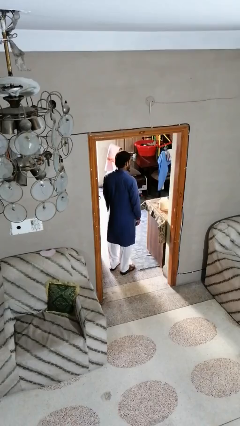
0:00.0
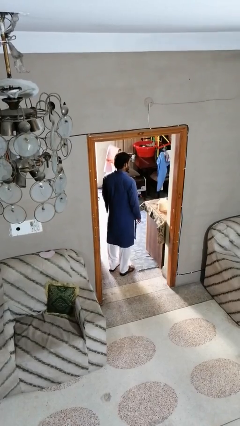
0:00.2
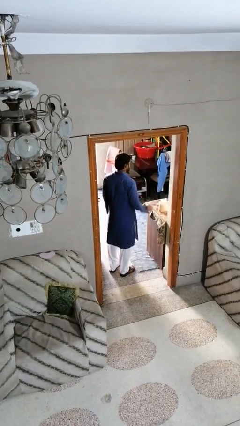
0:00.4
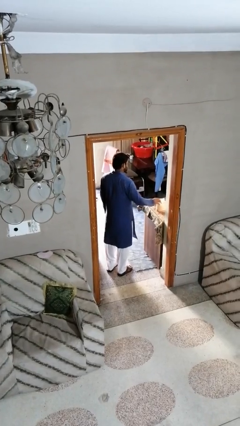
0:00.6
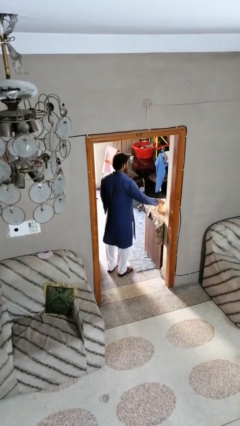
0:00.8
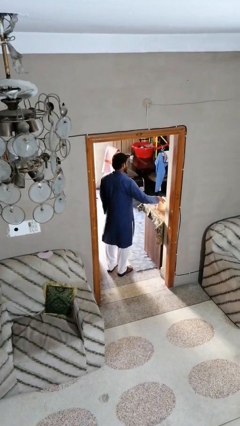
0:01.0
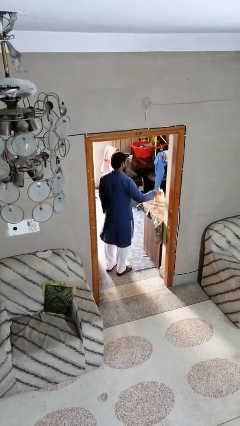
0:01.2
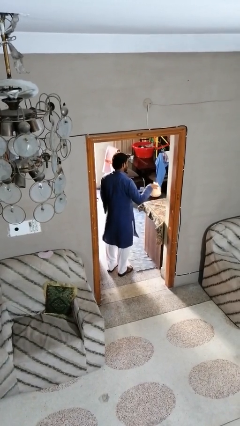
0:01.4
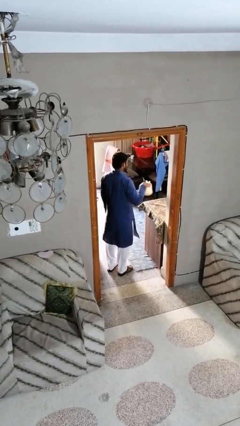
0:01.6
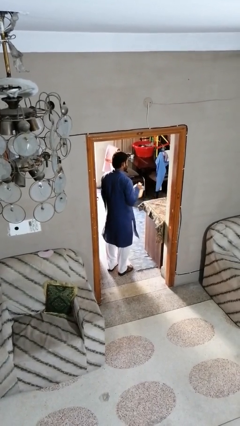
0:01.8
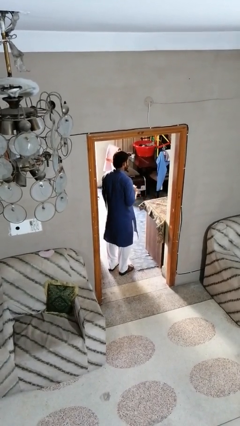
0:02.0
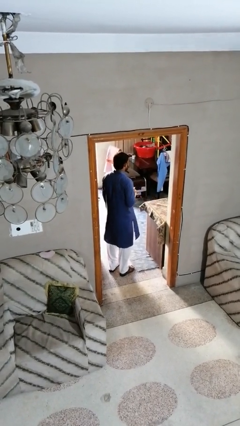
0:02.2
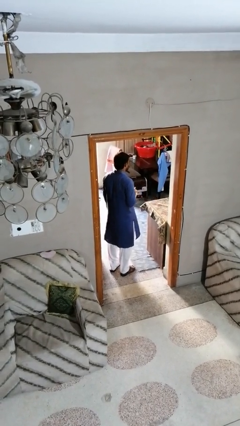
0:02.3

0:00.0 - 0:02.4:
person picks up object from countertop

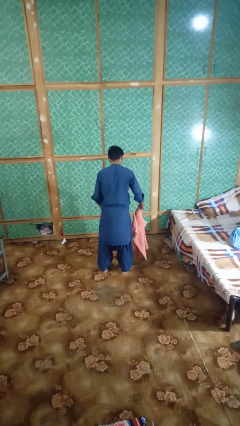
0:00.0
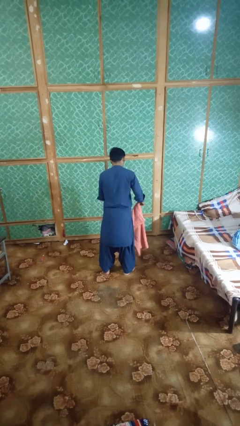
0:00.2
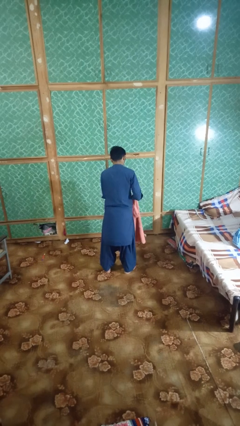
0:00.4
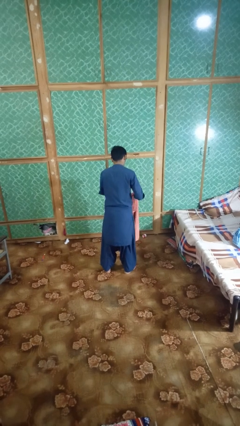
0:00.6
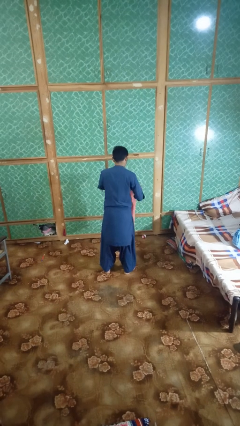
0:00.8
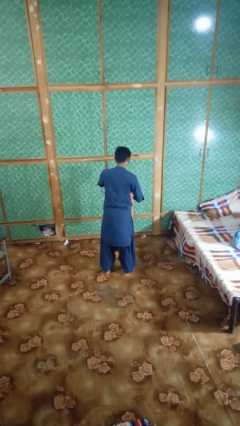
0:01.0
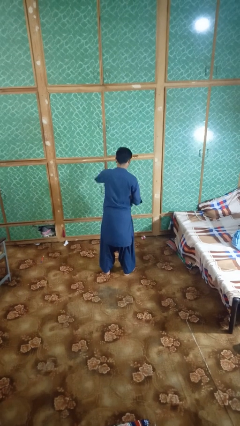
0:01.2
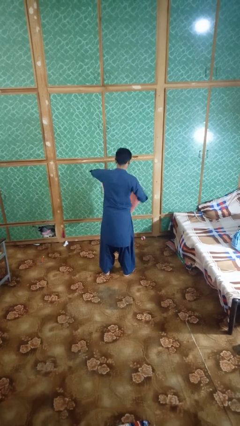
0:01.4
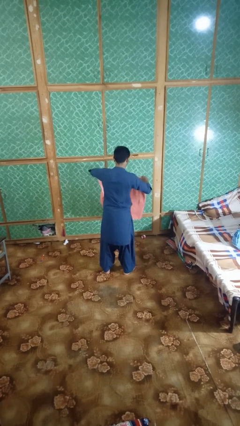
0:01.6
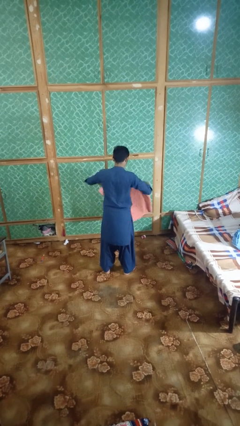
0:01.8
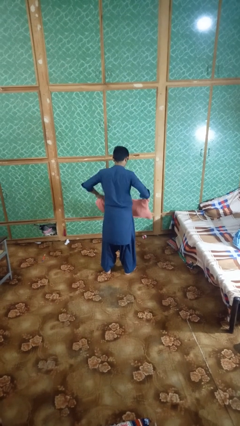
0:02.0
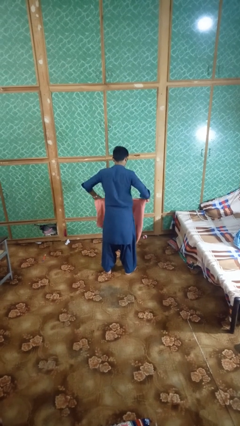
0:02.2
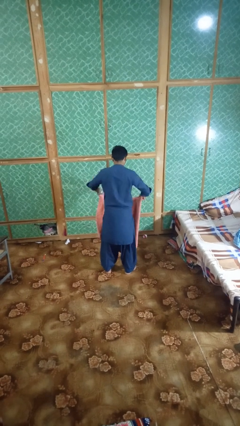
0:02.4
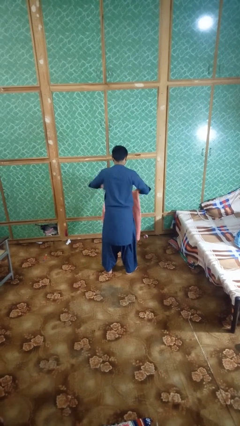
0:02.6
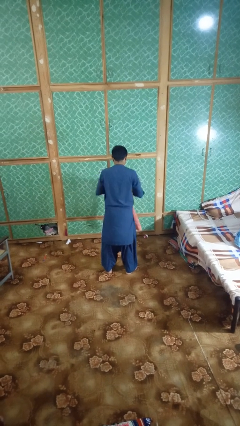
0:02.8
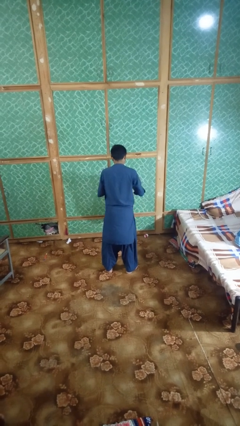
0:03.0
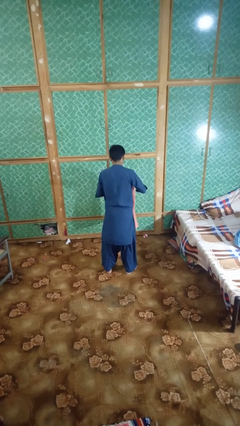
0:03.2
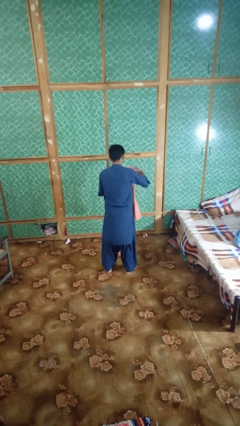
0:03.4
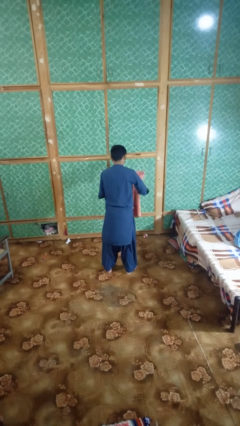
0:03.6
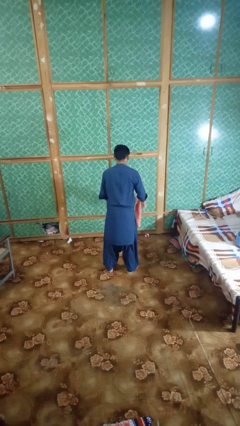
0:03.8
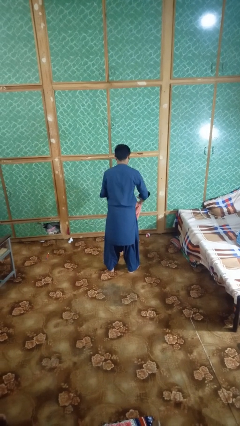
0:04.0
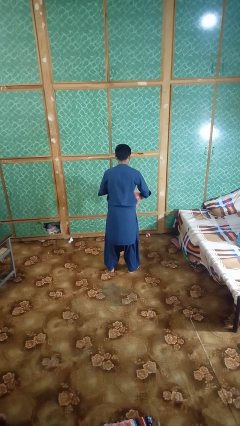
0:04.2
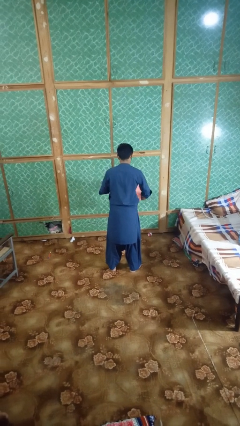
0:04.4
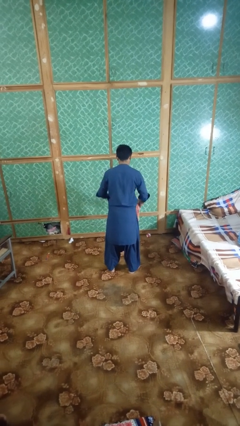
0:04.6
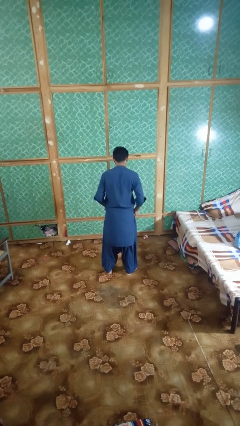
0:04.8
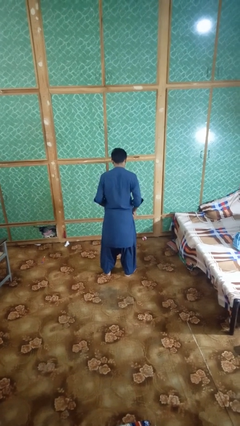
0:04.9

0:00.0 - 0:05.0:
person folds towel

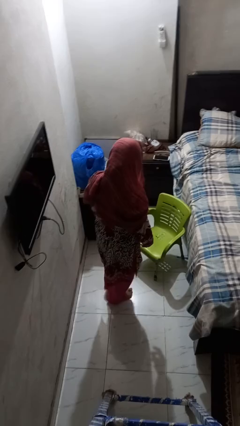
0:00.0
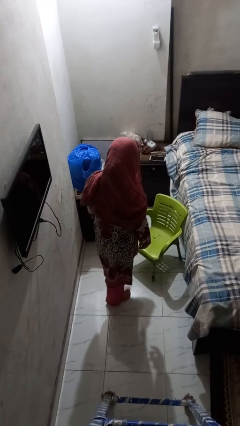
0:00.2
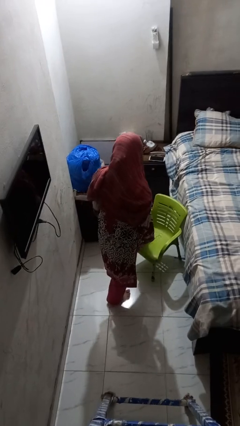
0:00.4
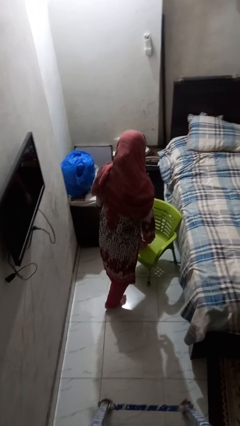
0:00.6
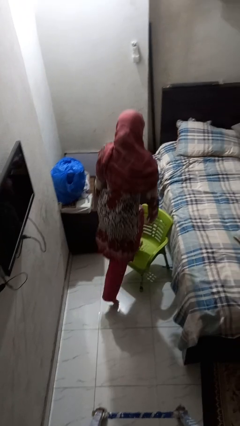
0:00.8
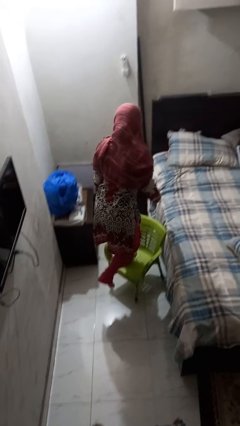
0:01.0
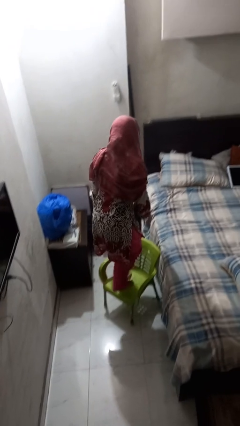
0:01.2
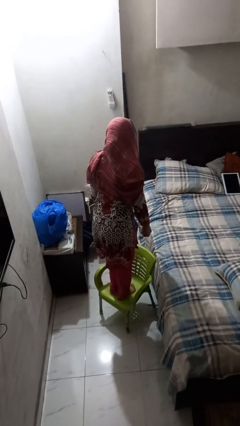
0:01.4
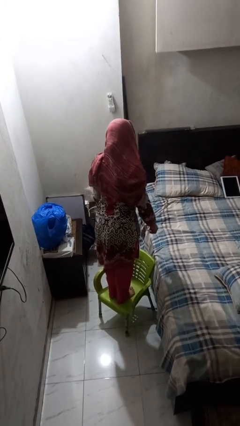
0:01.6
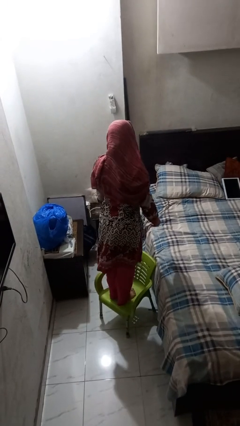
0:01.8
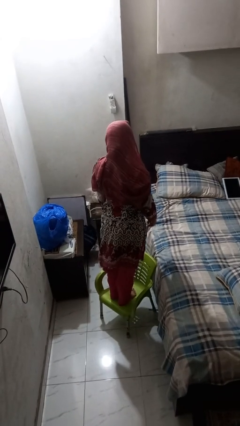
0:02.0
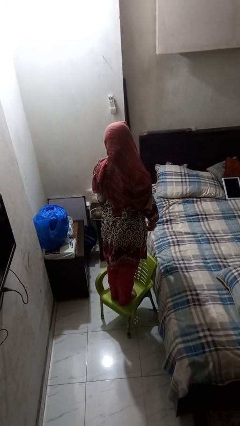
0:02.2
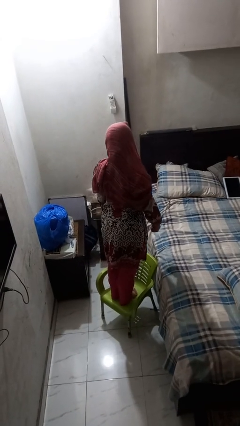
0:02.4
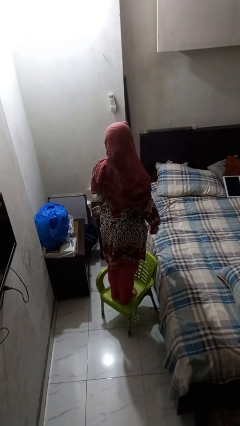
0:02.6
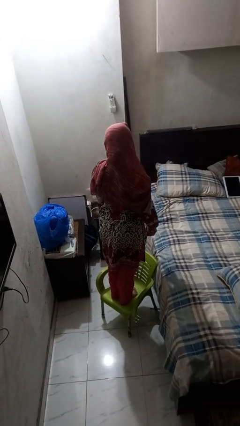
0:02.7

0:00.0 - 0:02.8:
person climbs on chair

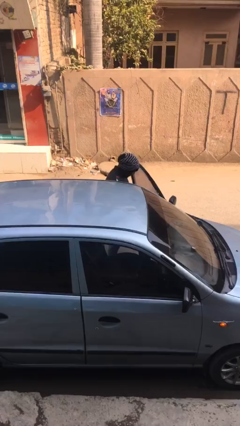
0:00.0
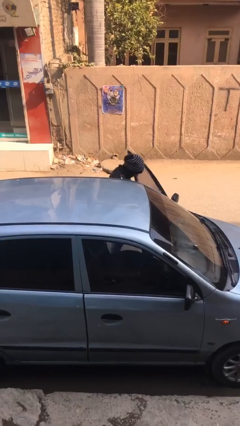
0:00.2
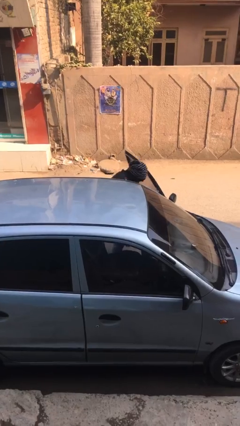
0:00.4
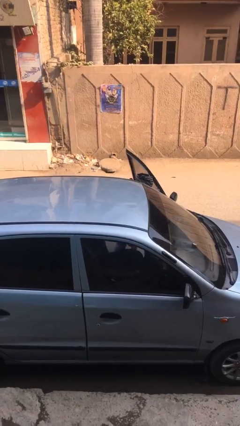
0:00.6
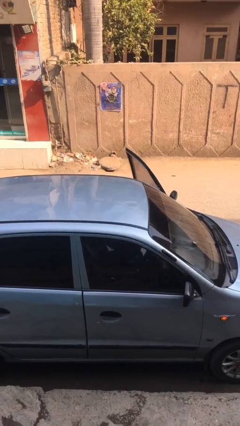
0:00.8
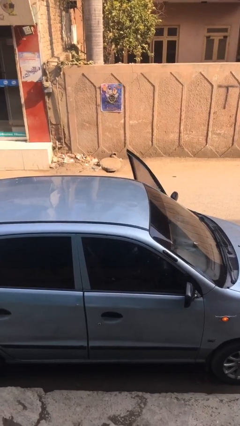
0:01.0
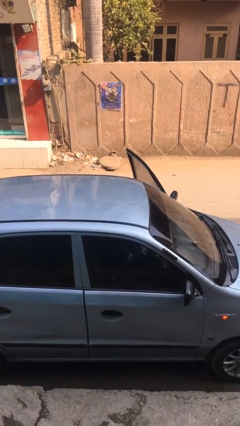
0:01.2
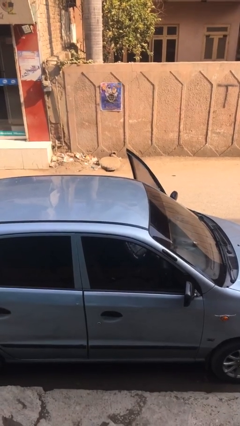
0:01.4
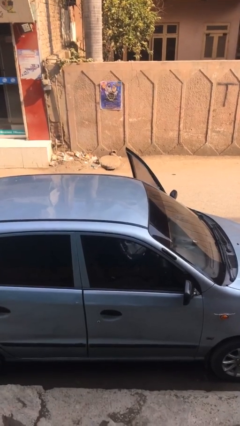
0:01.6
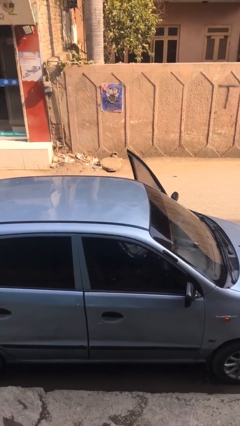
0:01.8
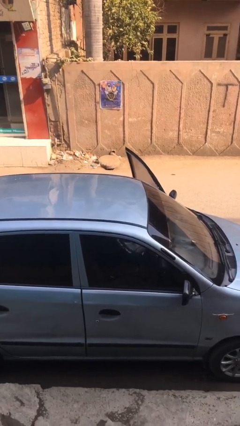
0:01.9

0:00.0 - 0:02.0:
person enters car

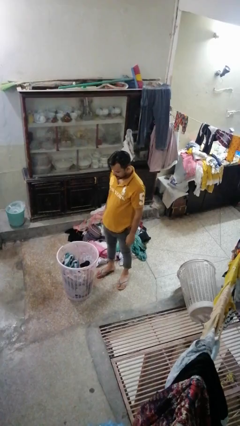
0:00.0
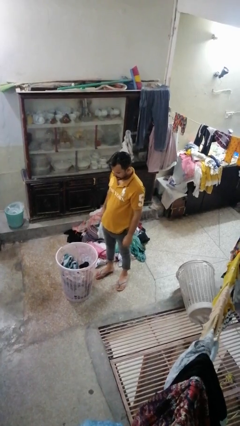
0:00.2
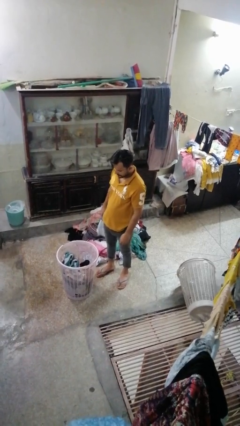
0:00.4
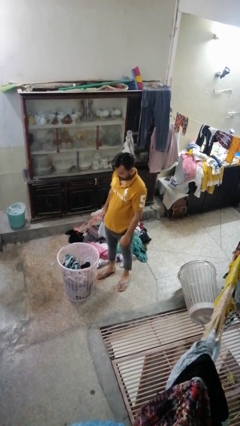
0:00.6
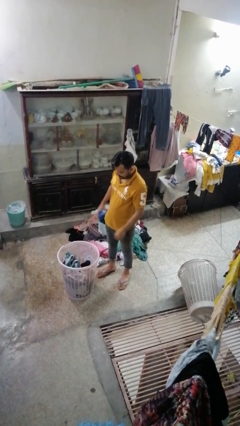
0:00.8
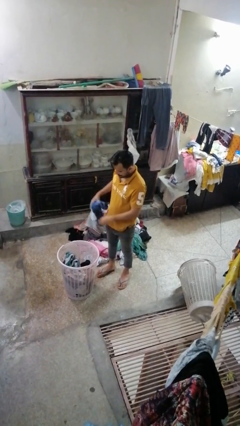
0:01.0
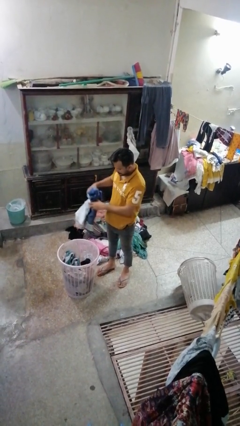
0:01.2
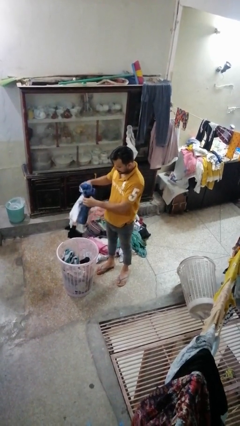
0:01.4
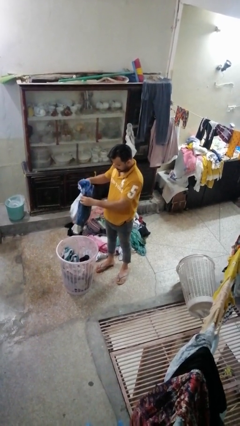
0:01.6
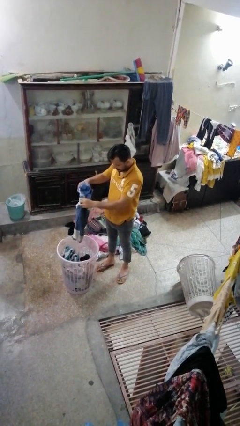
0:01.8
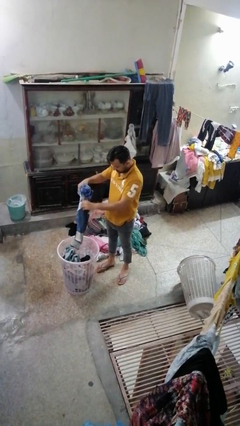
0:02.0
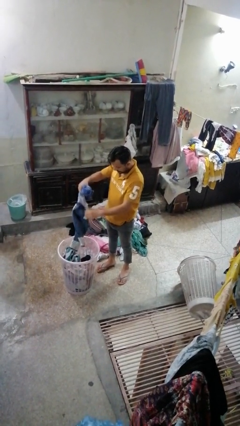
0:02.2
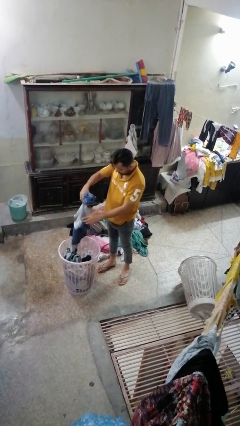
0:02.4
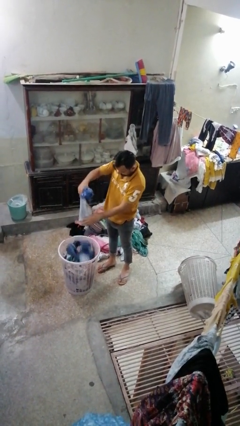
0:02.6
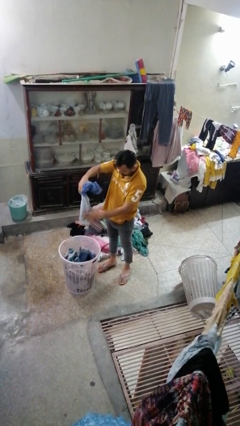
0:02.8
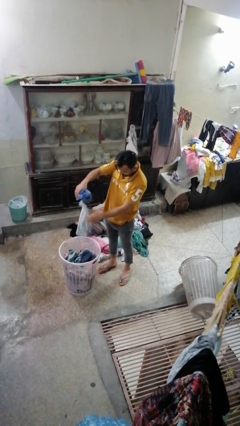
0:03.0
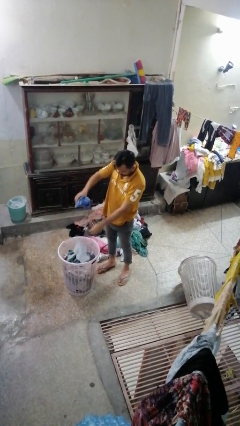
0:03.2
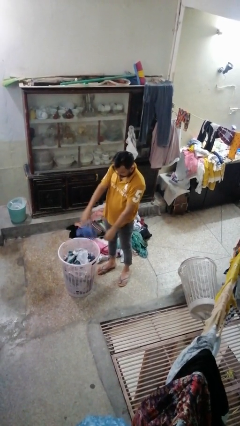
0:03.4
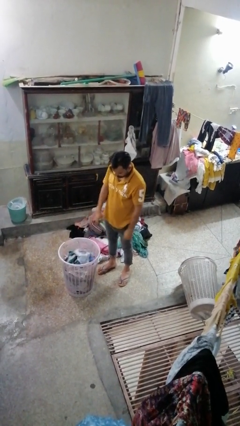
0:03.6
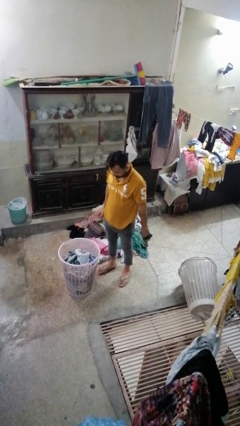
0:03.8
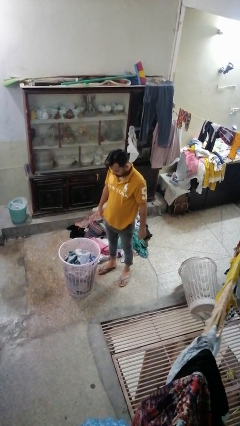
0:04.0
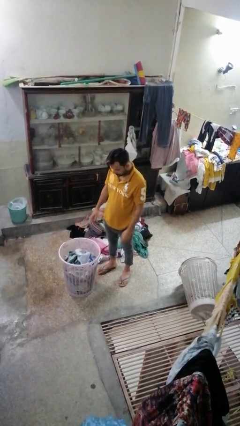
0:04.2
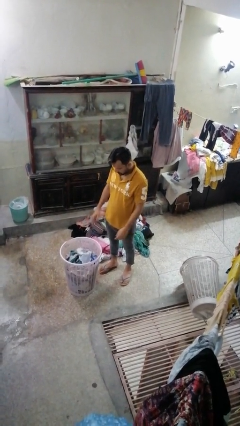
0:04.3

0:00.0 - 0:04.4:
person puts object into basket

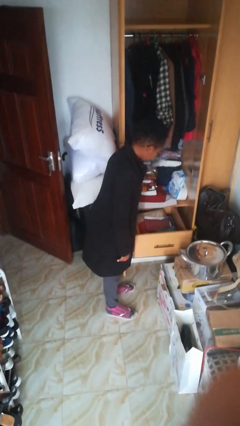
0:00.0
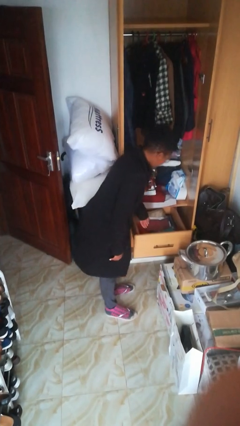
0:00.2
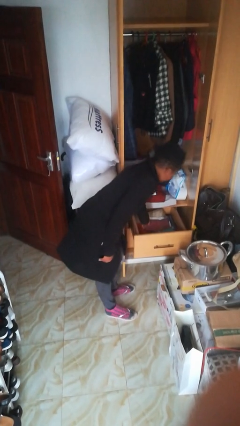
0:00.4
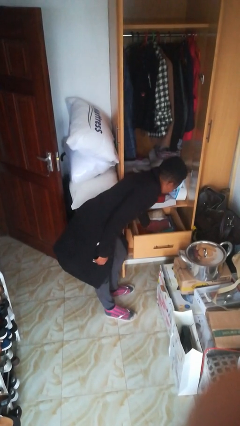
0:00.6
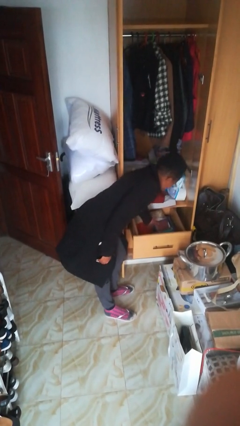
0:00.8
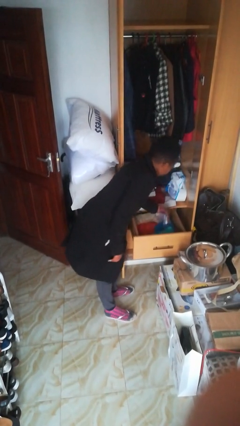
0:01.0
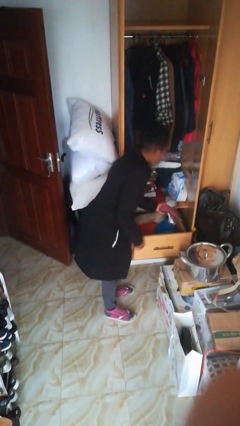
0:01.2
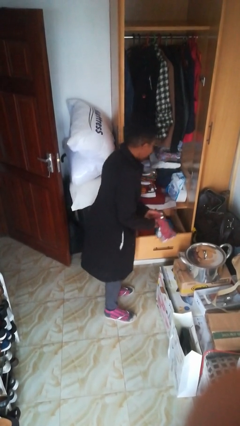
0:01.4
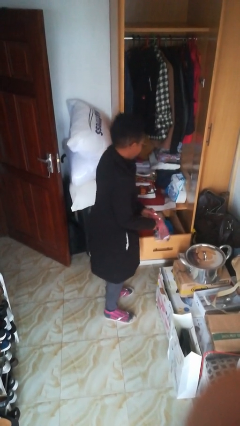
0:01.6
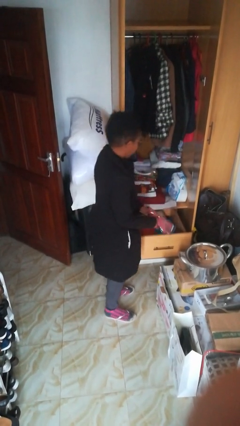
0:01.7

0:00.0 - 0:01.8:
person takes clothes from dresser
